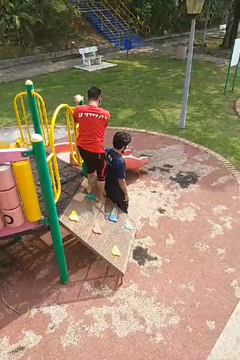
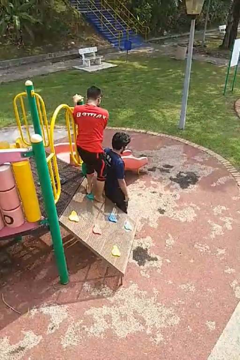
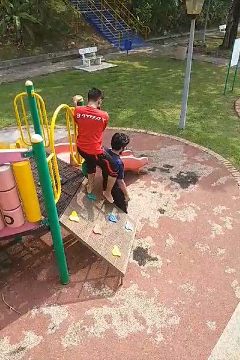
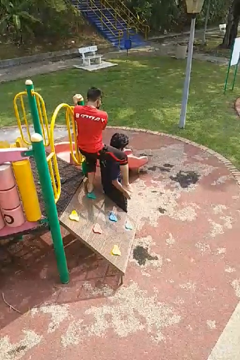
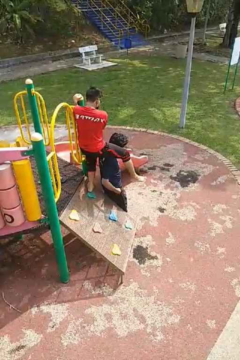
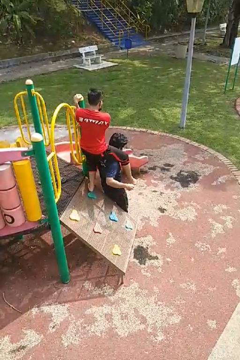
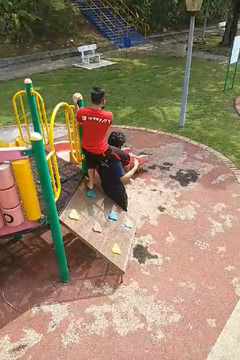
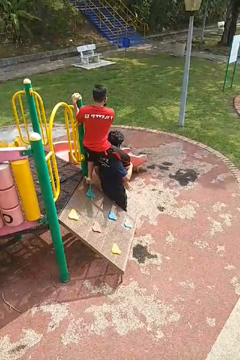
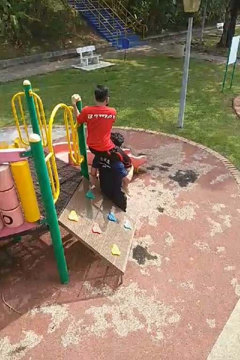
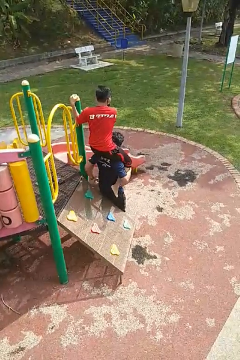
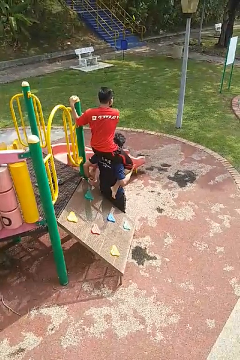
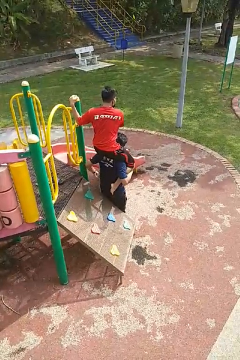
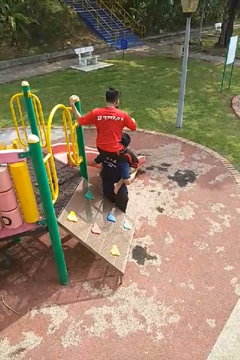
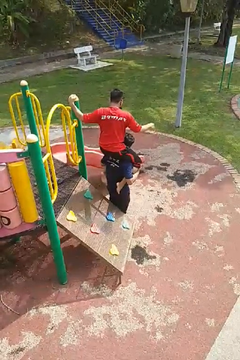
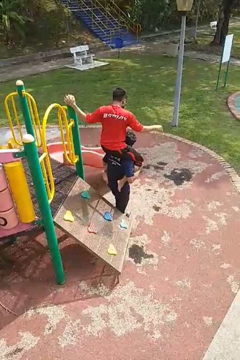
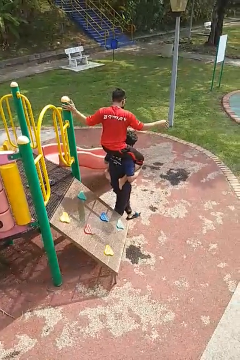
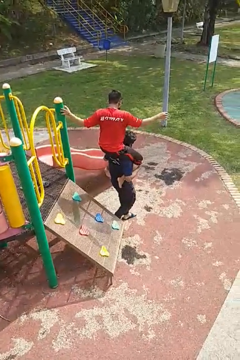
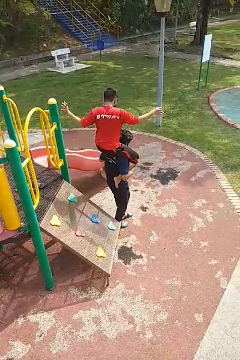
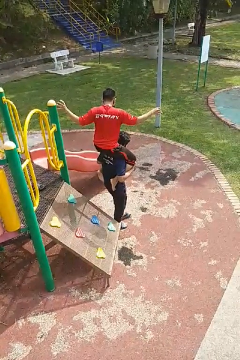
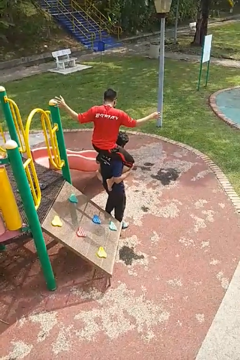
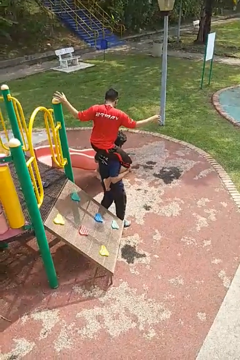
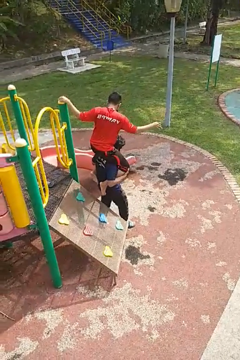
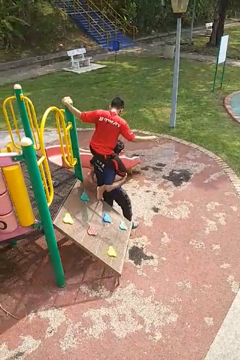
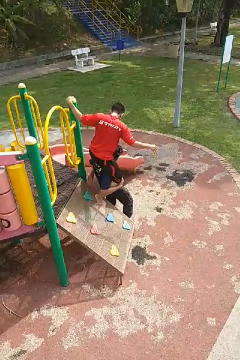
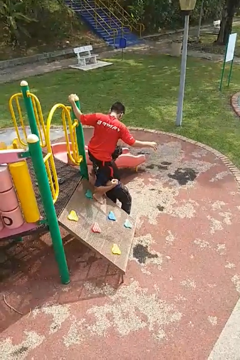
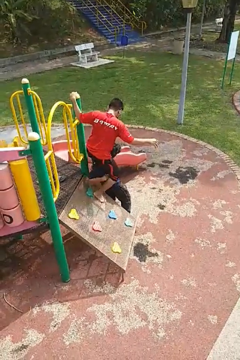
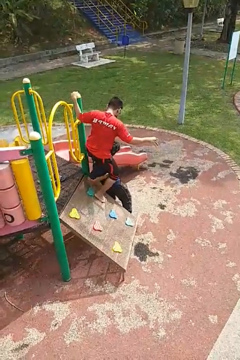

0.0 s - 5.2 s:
person carries person on shoulders

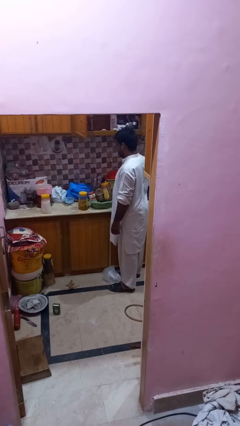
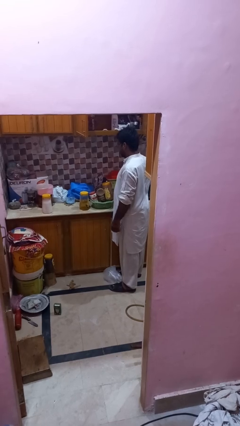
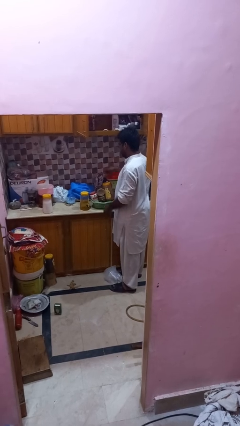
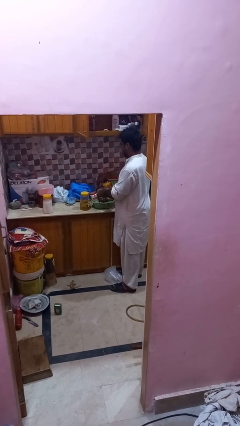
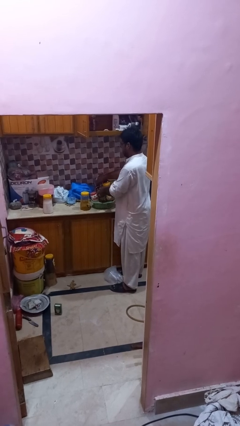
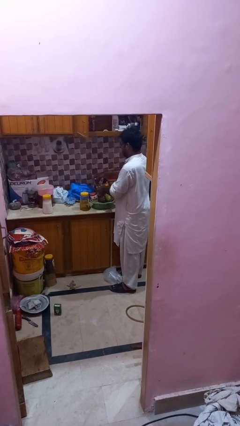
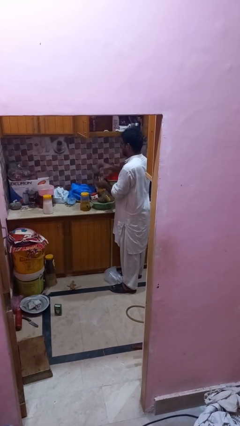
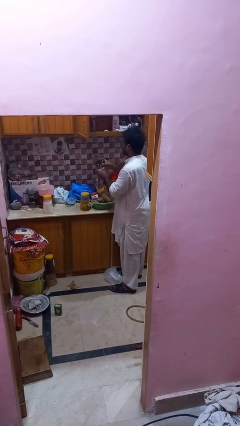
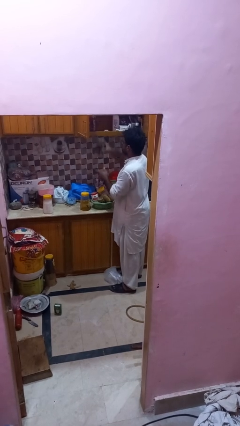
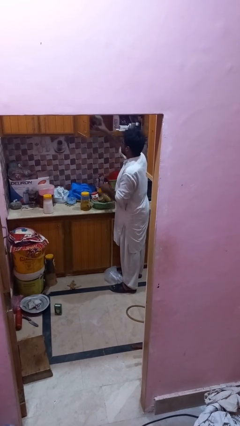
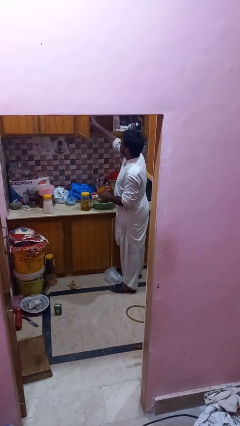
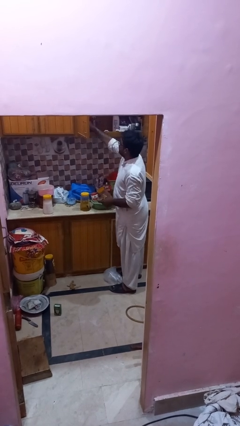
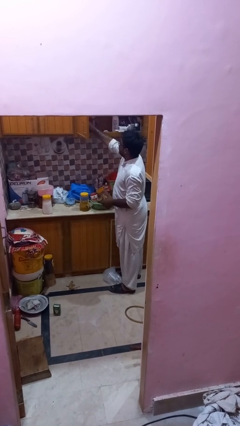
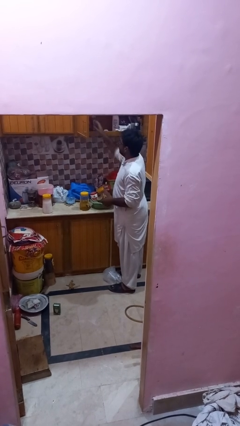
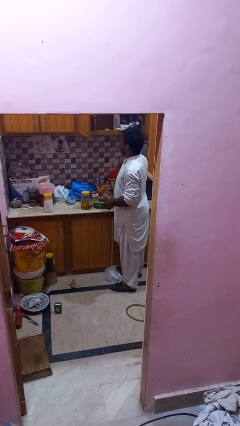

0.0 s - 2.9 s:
person loads groceries into cabinet

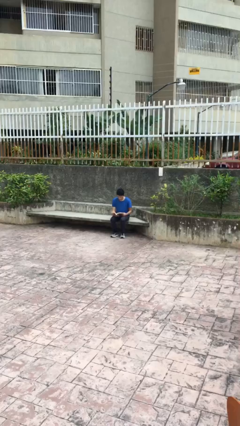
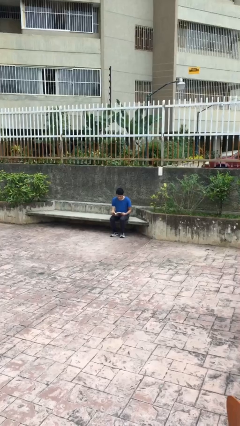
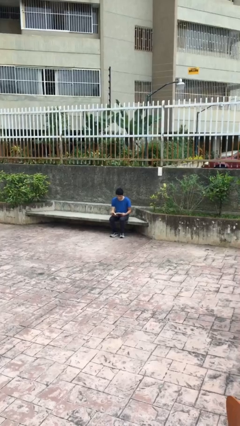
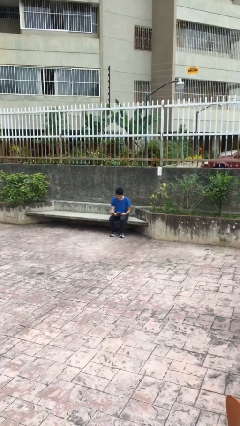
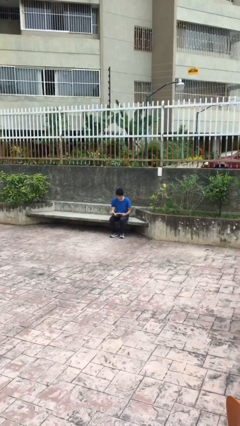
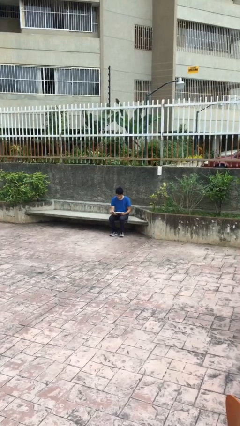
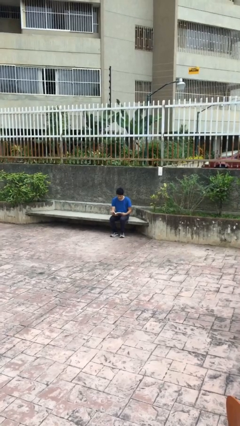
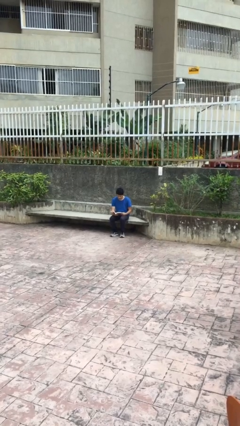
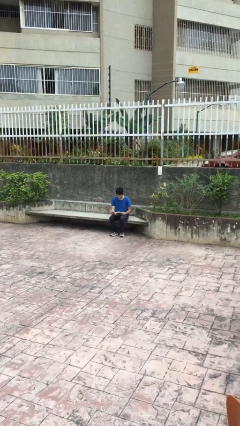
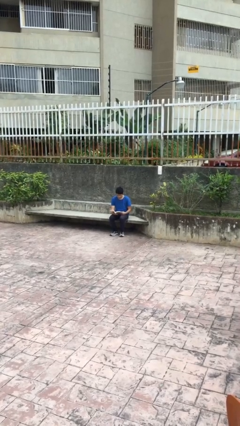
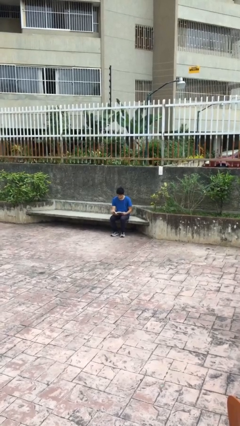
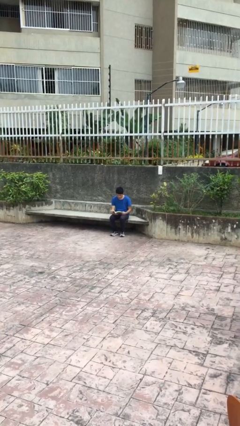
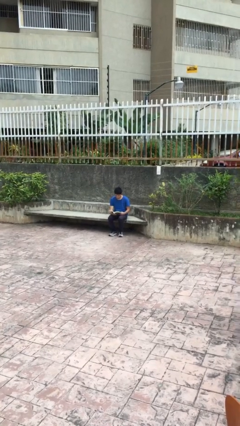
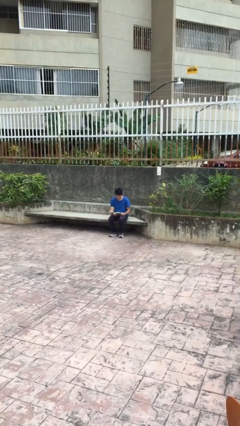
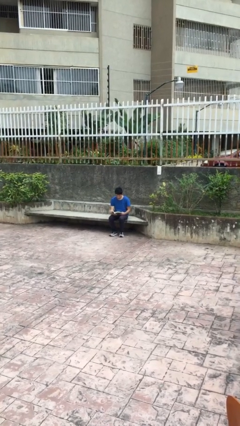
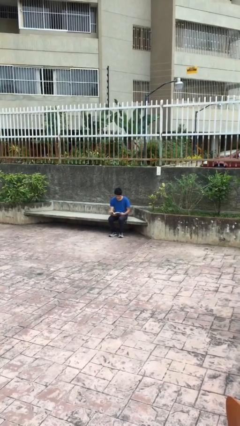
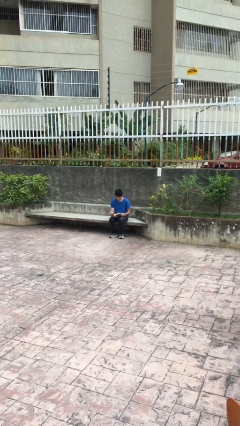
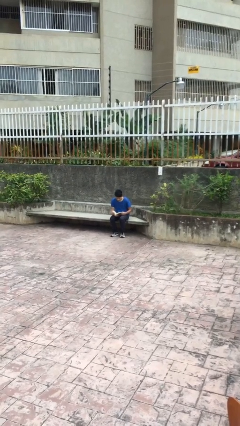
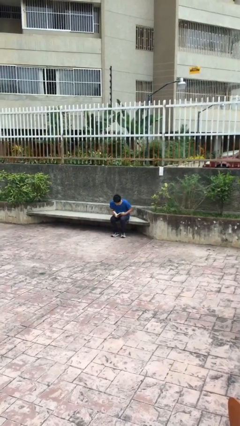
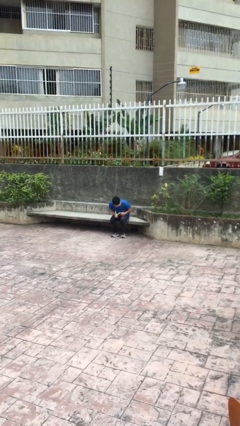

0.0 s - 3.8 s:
person reads document

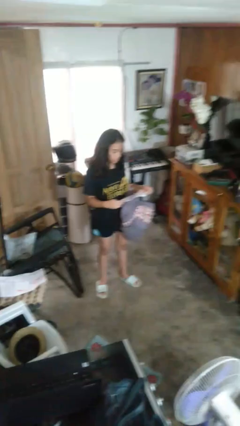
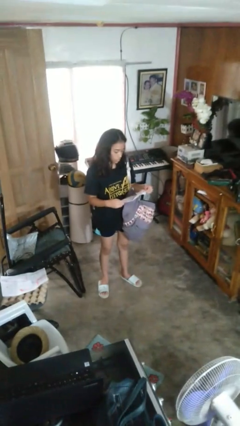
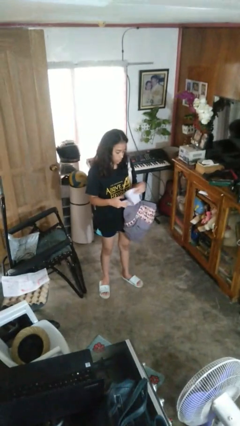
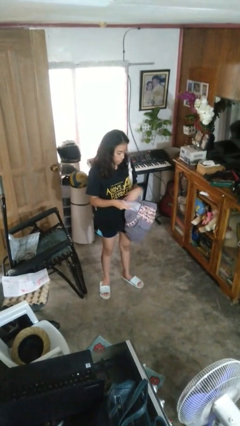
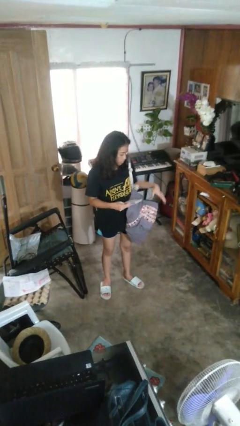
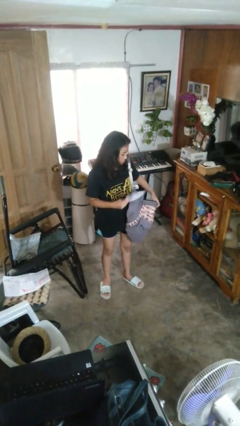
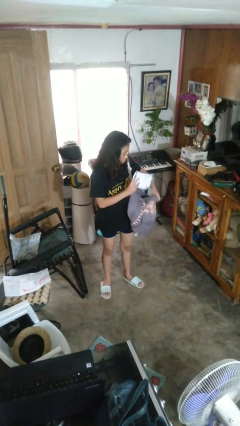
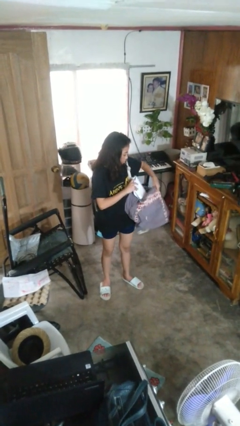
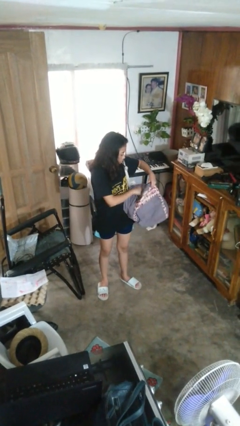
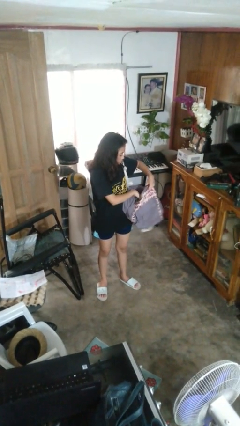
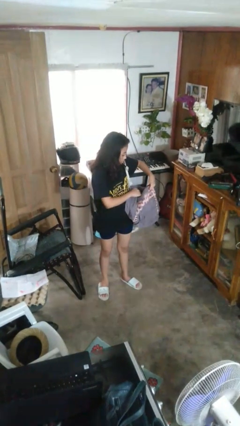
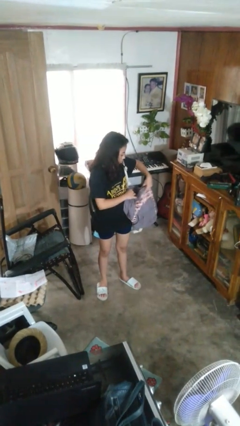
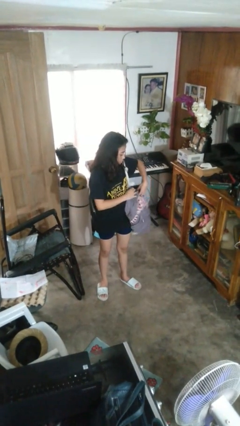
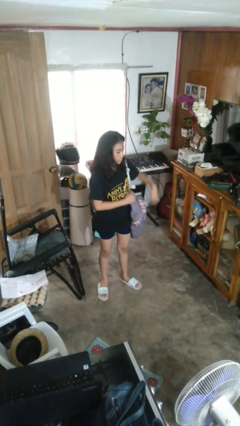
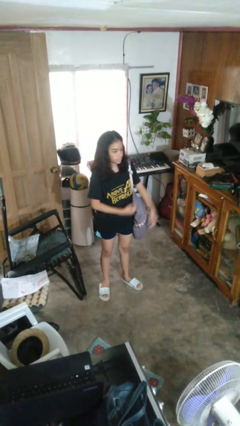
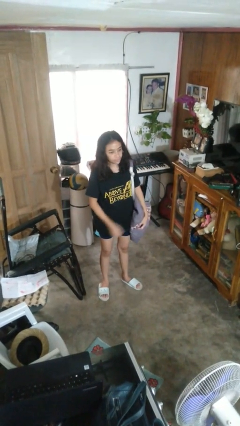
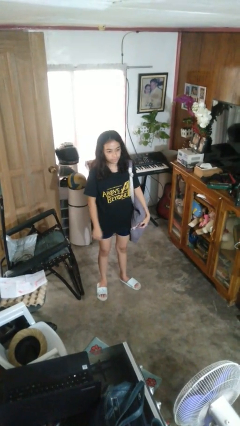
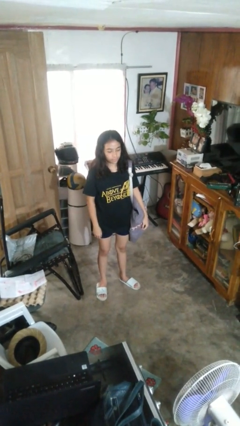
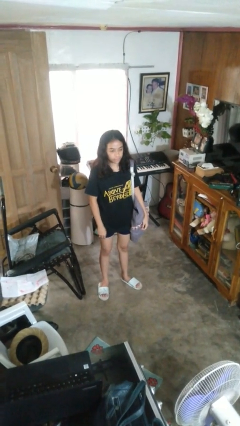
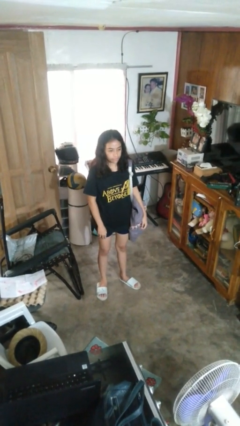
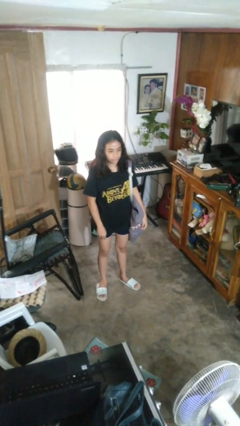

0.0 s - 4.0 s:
person puts object into backpack

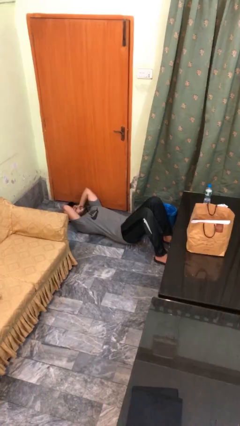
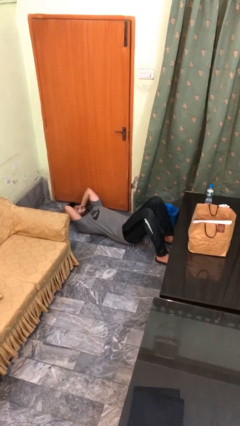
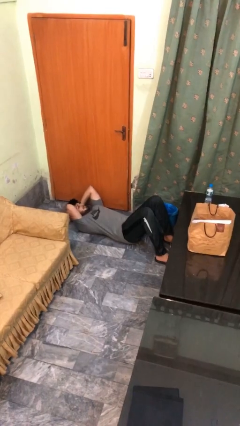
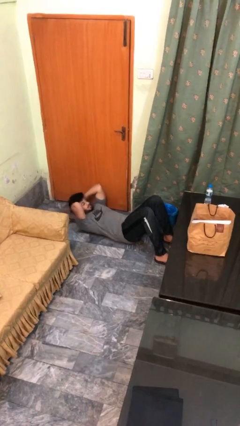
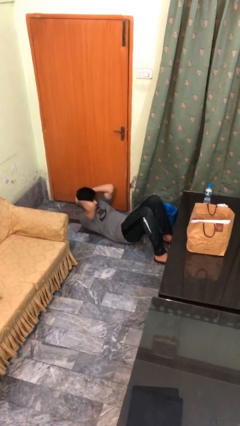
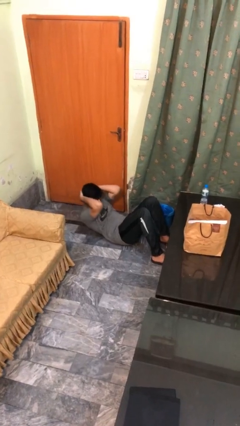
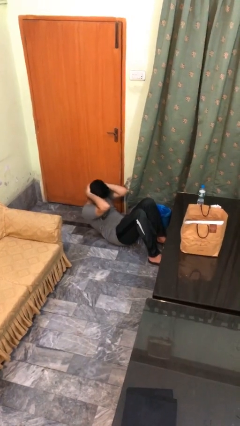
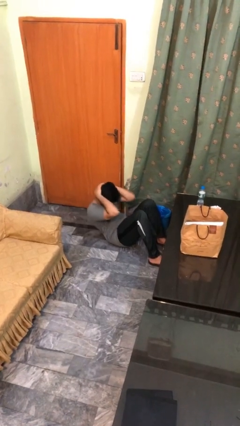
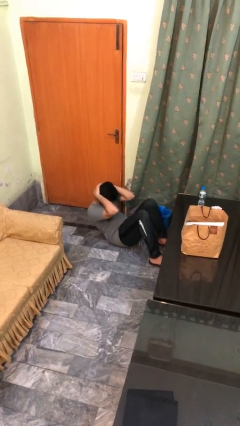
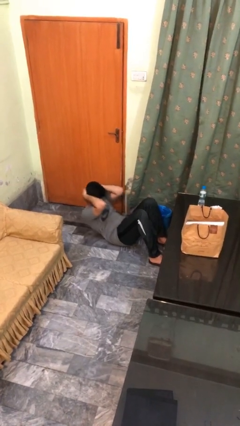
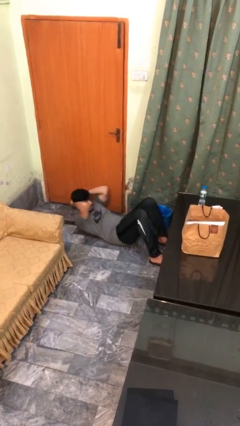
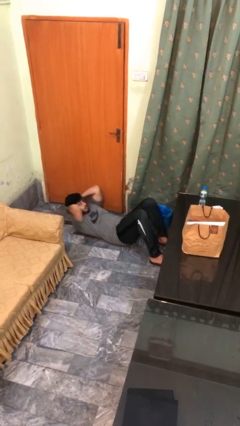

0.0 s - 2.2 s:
person exercises with situp

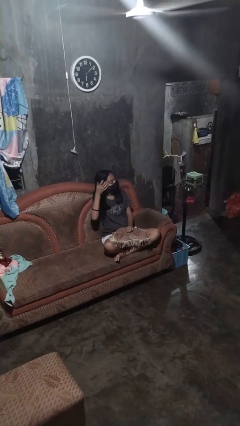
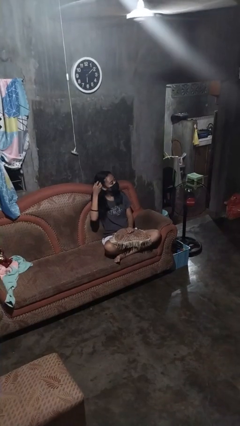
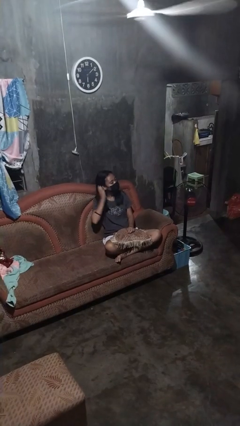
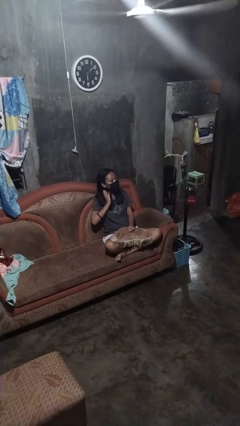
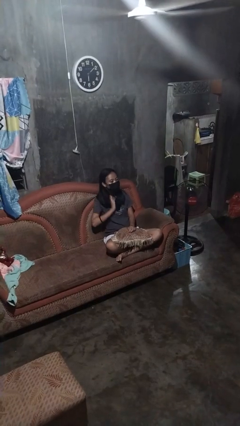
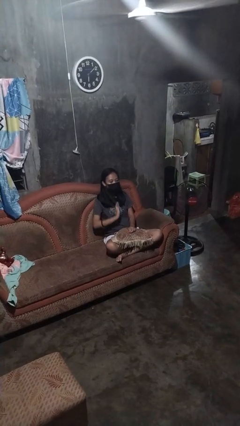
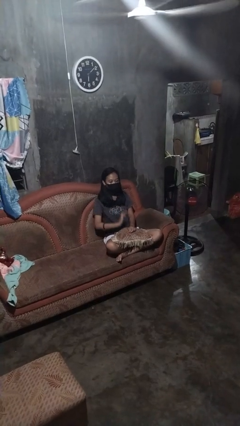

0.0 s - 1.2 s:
person strokes hair
